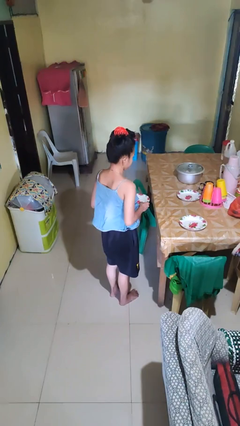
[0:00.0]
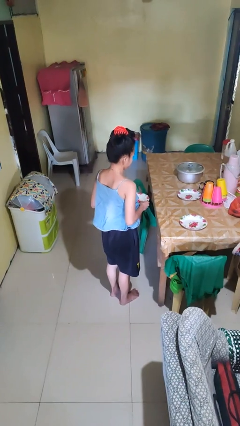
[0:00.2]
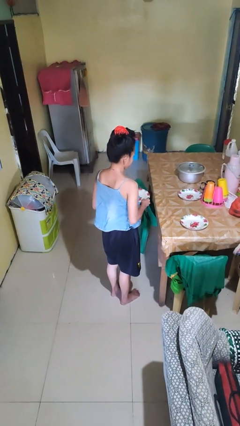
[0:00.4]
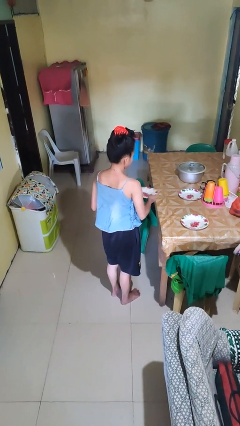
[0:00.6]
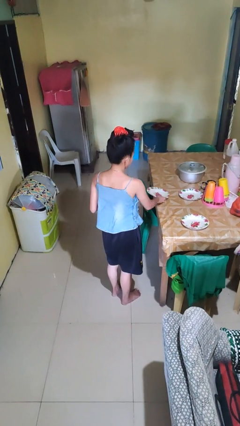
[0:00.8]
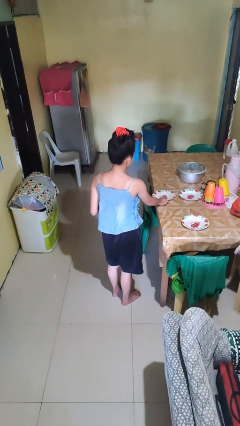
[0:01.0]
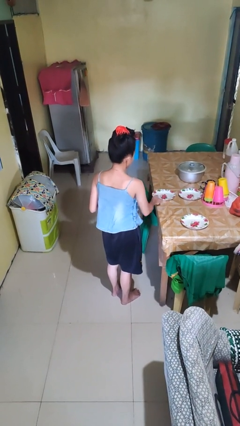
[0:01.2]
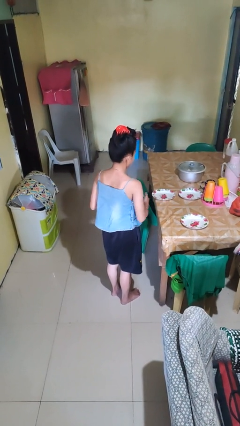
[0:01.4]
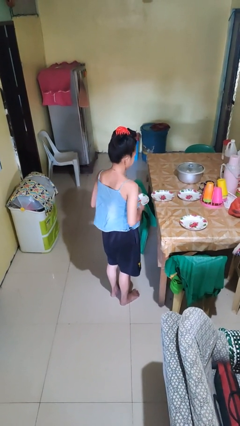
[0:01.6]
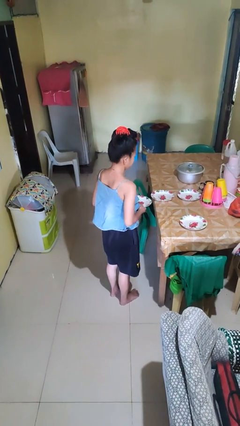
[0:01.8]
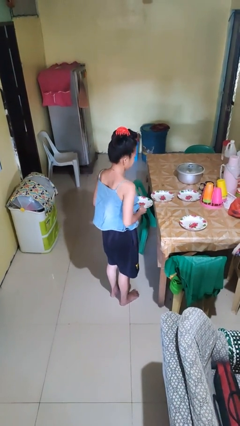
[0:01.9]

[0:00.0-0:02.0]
person sets table

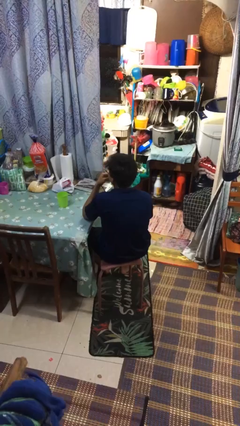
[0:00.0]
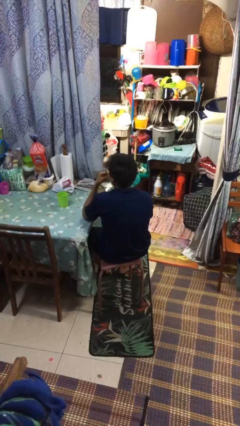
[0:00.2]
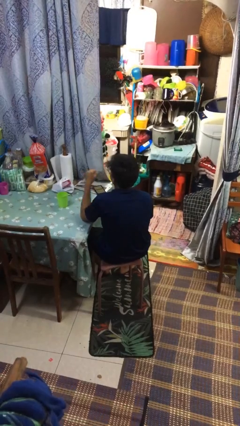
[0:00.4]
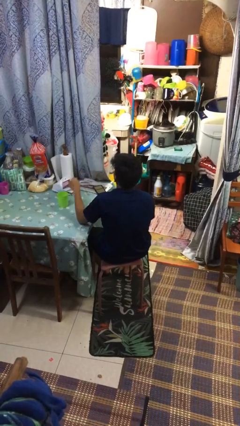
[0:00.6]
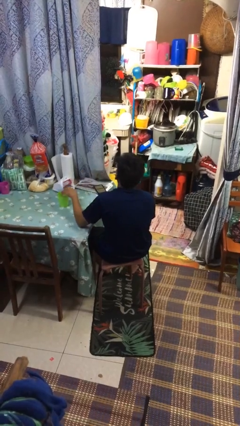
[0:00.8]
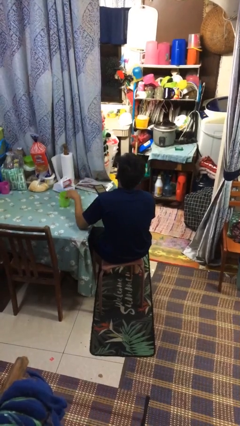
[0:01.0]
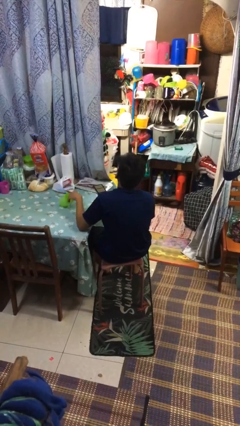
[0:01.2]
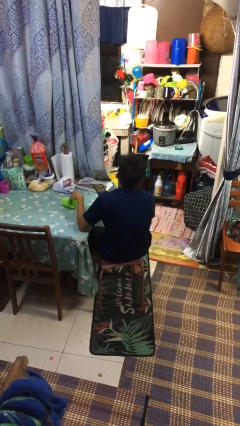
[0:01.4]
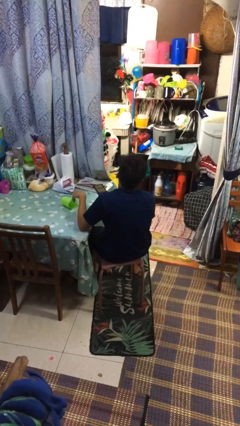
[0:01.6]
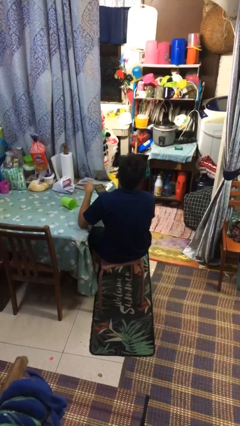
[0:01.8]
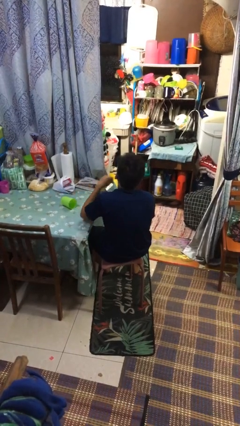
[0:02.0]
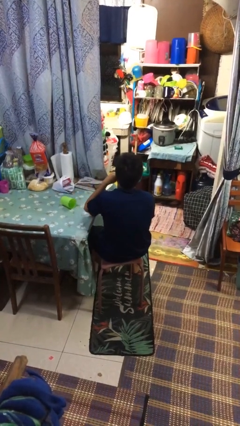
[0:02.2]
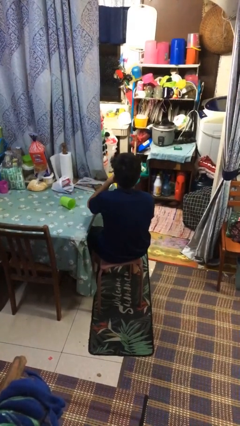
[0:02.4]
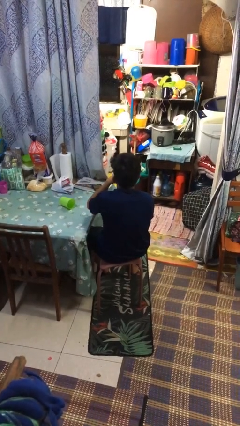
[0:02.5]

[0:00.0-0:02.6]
person knocks over glass

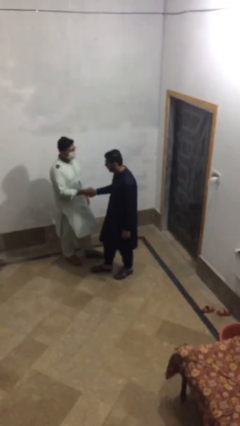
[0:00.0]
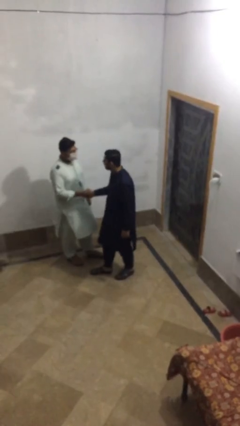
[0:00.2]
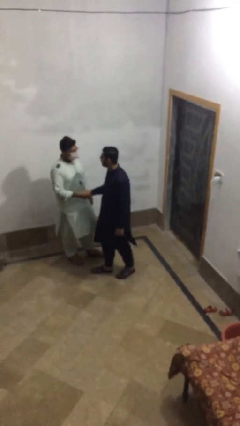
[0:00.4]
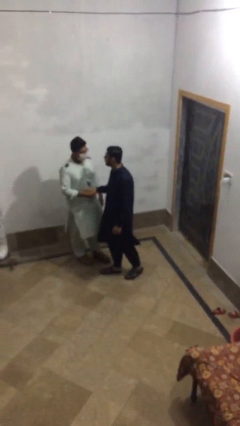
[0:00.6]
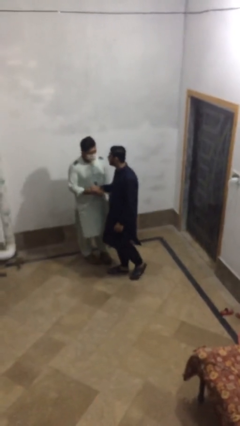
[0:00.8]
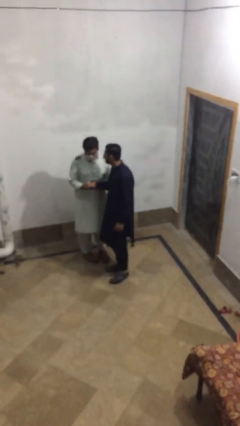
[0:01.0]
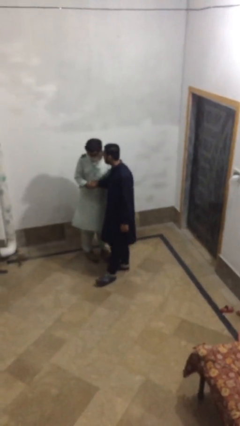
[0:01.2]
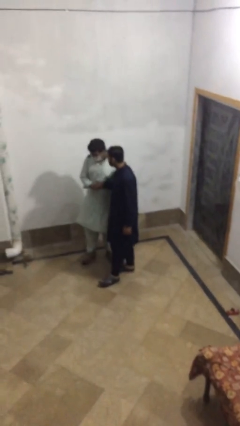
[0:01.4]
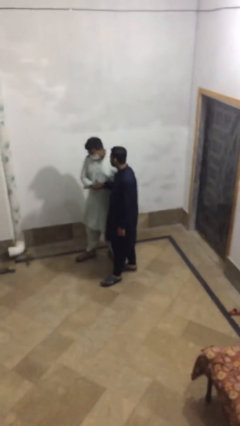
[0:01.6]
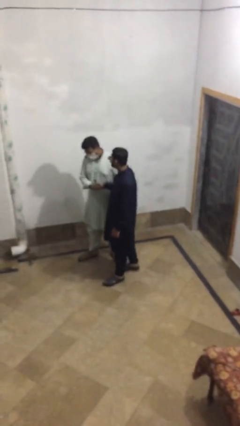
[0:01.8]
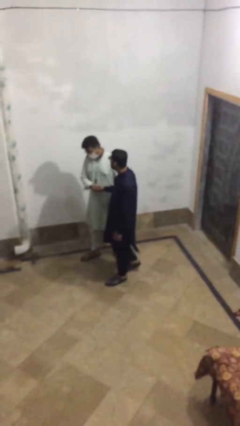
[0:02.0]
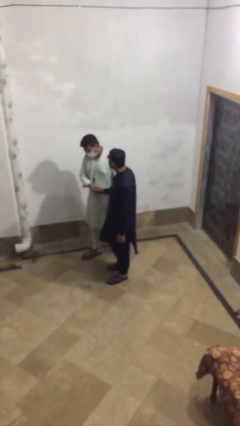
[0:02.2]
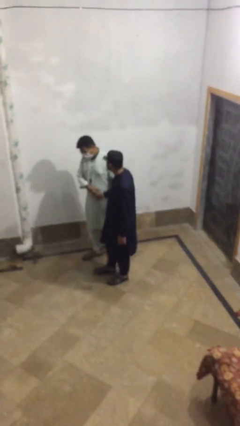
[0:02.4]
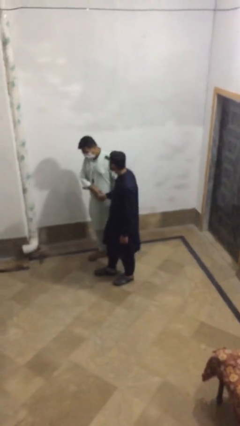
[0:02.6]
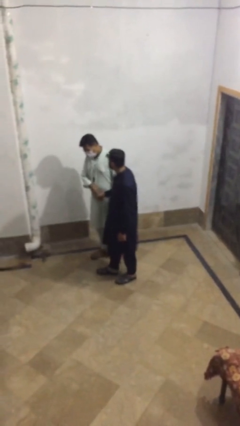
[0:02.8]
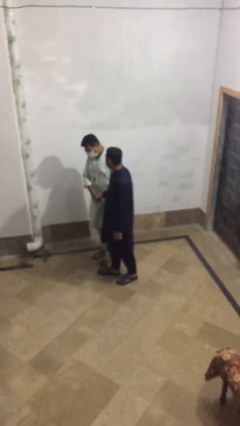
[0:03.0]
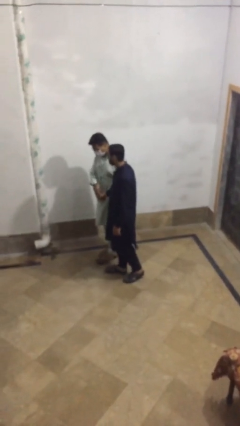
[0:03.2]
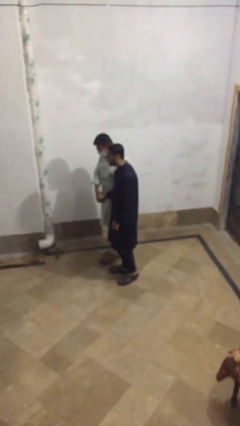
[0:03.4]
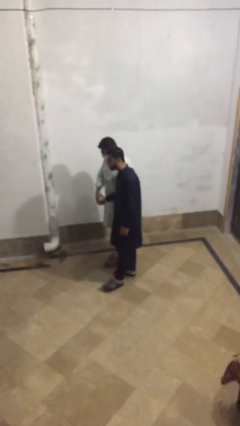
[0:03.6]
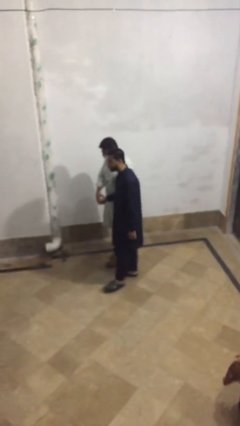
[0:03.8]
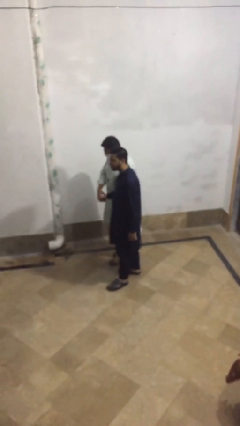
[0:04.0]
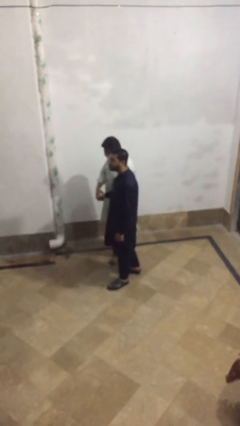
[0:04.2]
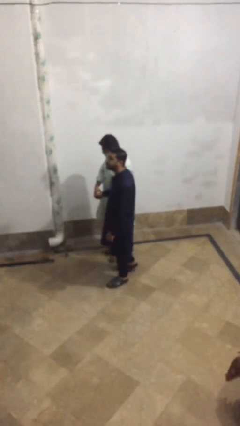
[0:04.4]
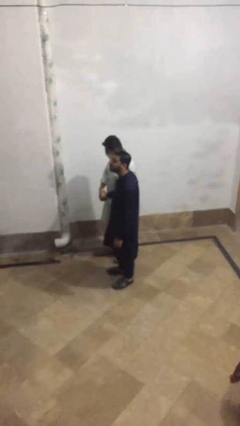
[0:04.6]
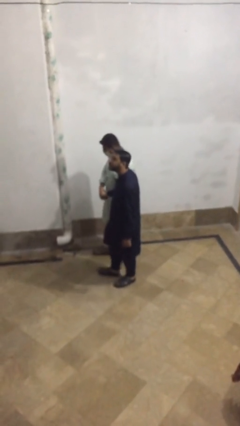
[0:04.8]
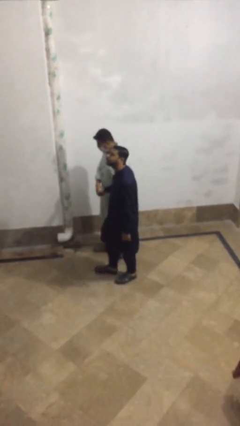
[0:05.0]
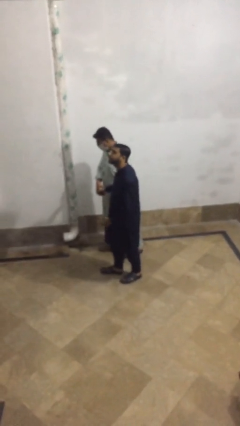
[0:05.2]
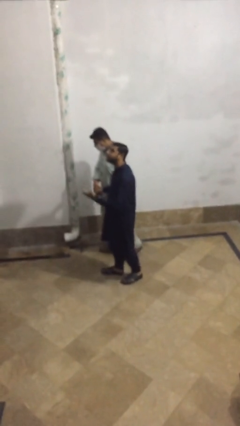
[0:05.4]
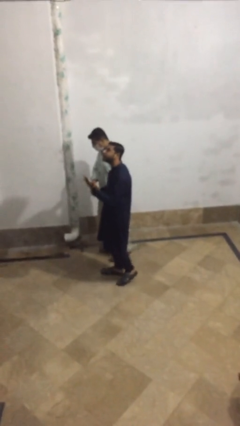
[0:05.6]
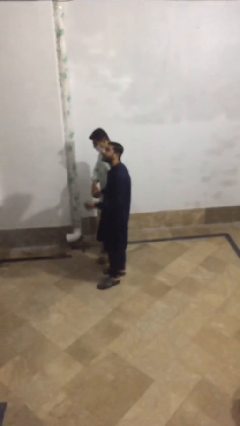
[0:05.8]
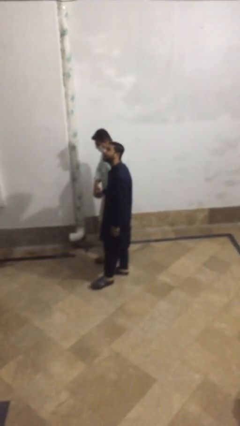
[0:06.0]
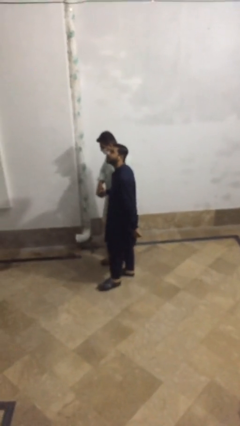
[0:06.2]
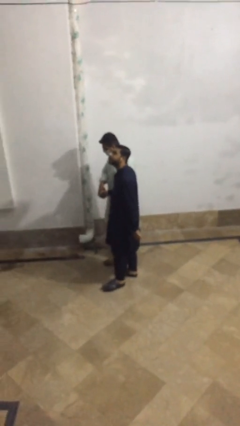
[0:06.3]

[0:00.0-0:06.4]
person talks to person

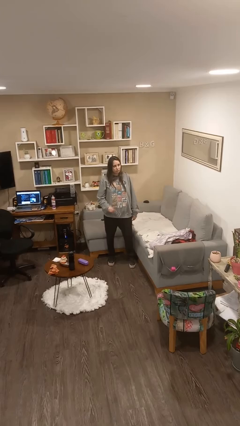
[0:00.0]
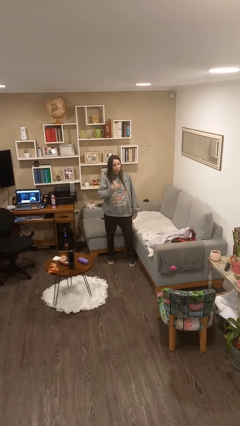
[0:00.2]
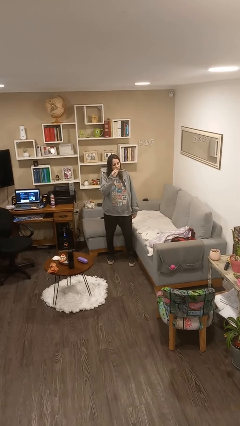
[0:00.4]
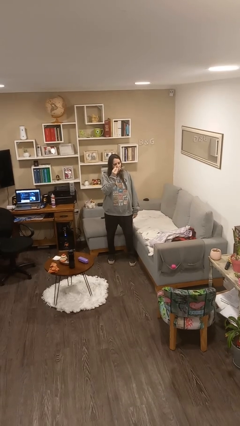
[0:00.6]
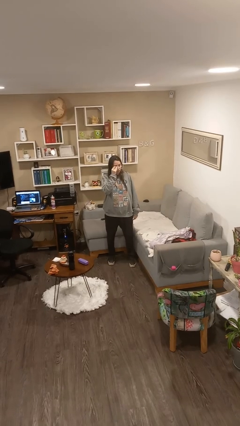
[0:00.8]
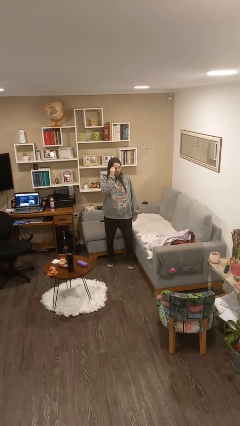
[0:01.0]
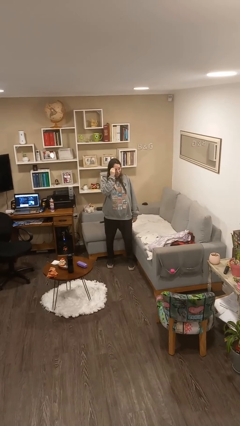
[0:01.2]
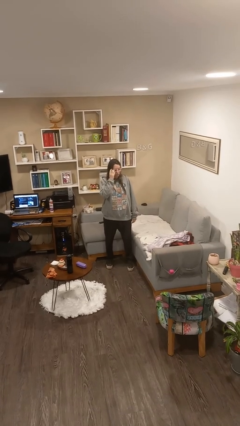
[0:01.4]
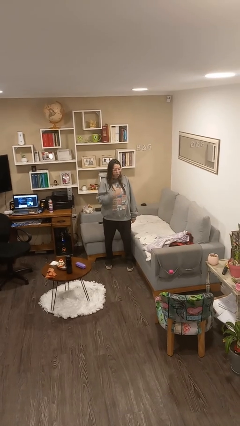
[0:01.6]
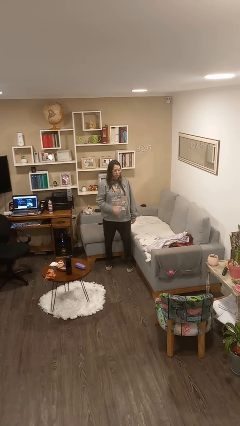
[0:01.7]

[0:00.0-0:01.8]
person puts on glasses

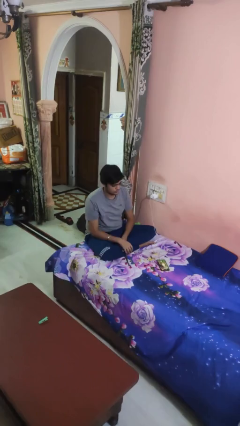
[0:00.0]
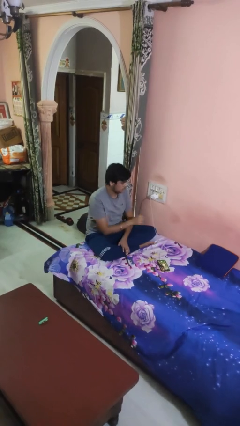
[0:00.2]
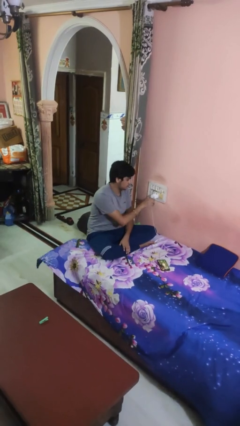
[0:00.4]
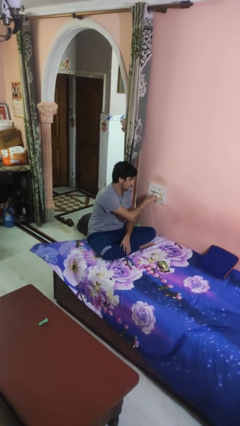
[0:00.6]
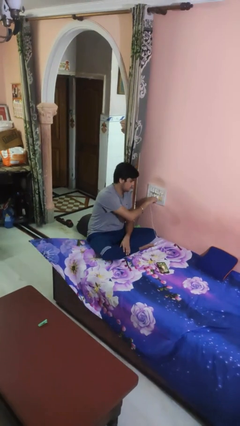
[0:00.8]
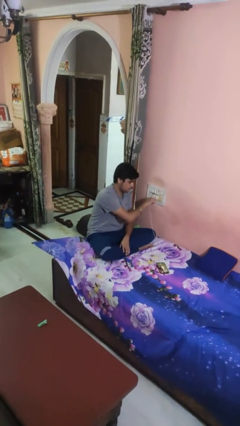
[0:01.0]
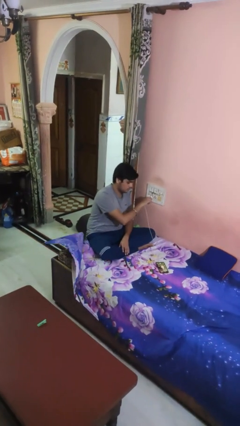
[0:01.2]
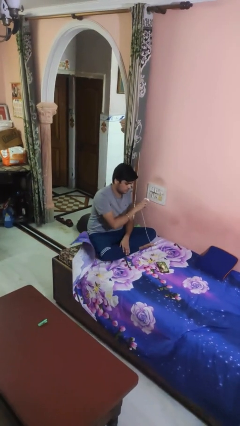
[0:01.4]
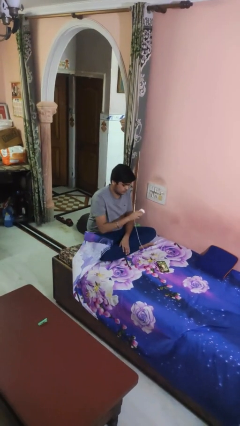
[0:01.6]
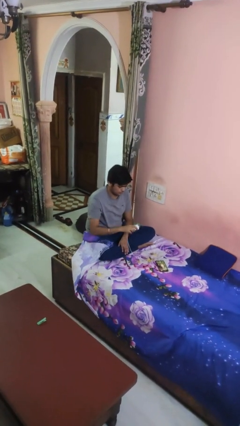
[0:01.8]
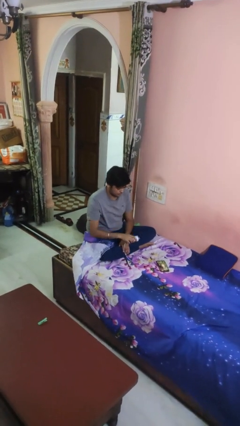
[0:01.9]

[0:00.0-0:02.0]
person unplugs from electrical socket

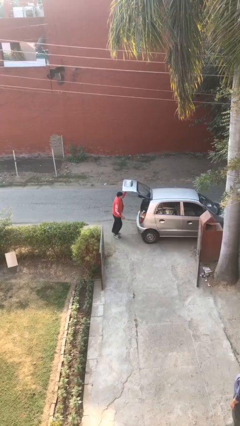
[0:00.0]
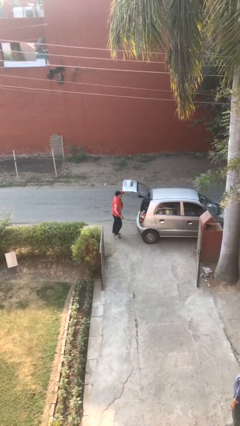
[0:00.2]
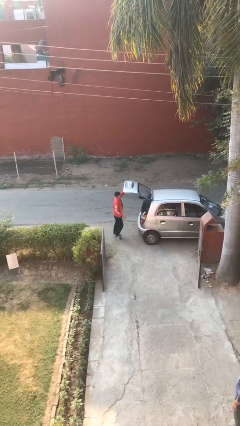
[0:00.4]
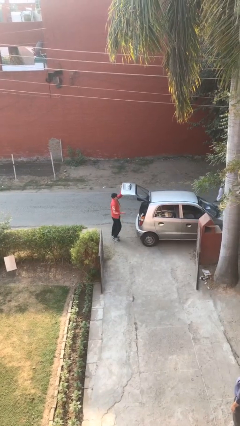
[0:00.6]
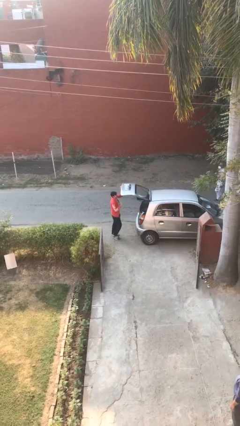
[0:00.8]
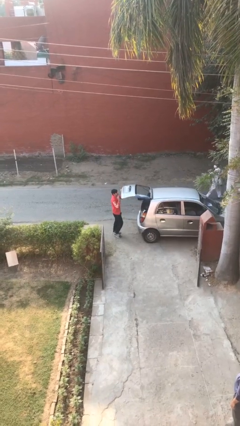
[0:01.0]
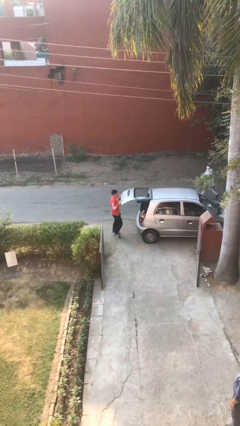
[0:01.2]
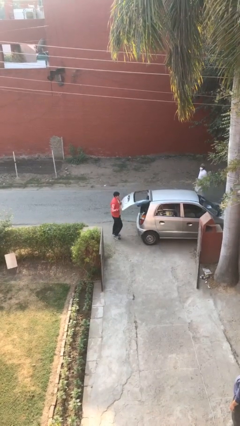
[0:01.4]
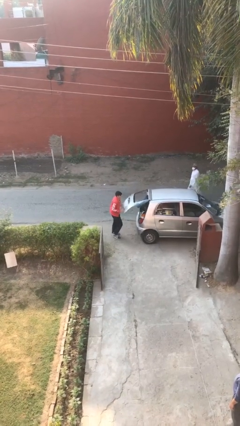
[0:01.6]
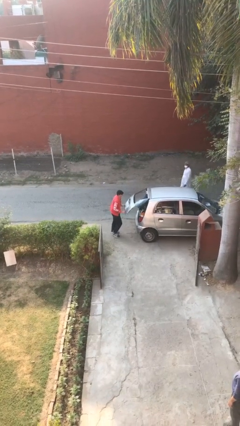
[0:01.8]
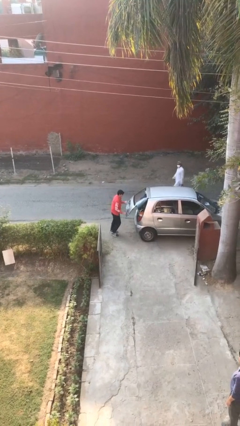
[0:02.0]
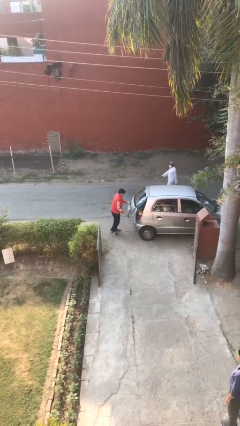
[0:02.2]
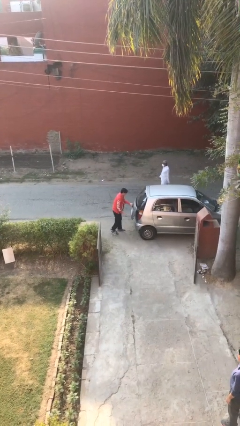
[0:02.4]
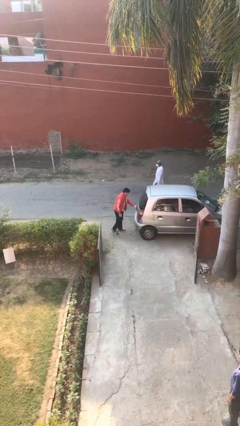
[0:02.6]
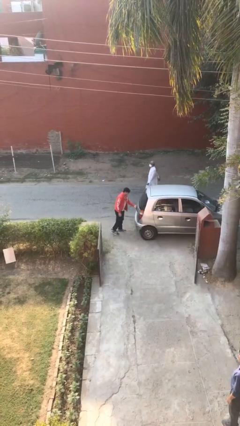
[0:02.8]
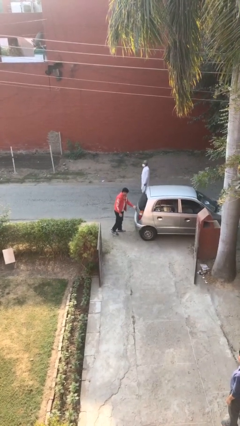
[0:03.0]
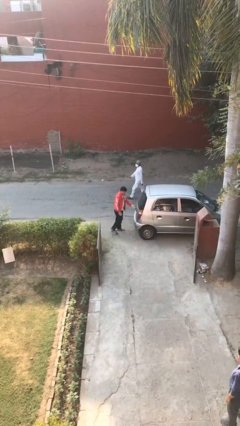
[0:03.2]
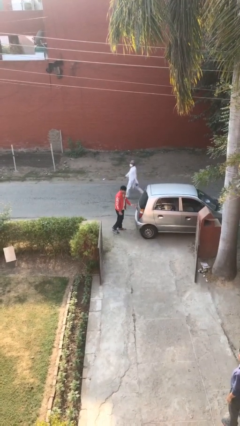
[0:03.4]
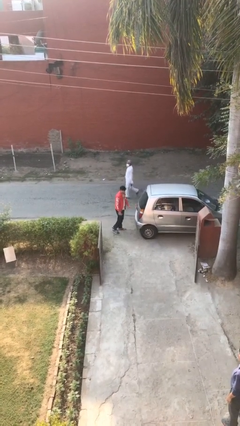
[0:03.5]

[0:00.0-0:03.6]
person closes car trunk
